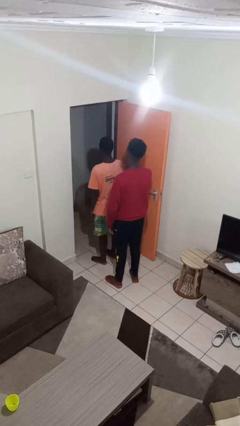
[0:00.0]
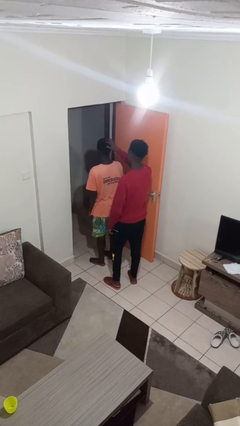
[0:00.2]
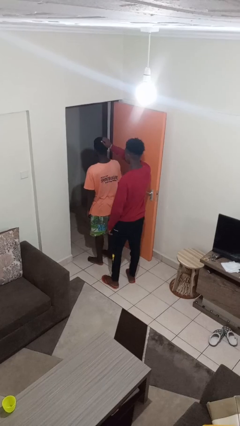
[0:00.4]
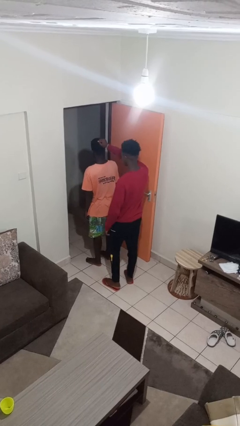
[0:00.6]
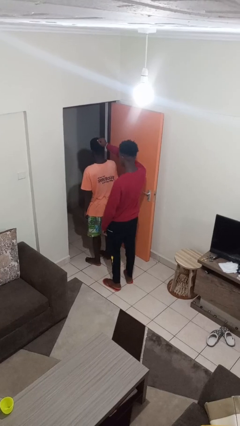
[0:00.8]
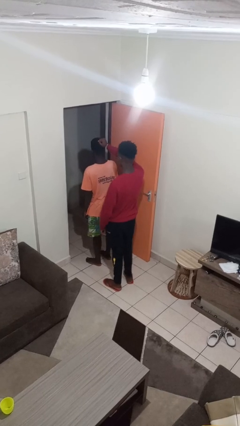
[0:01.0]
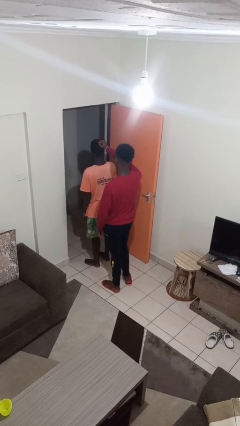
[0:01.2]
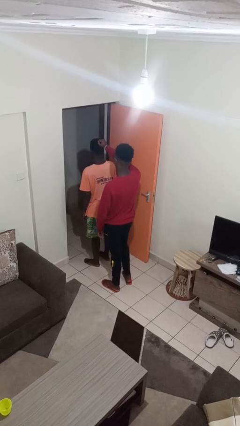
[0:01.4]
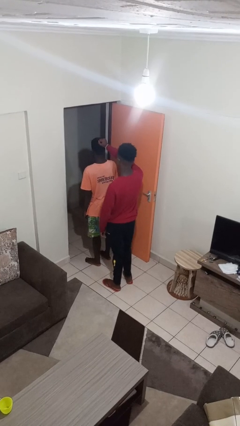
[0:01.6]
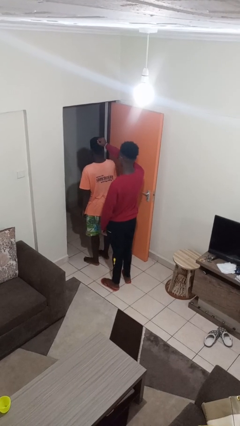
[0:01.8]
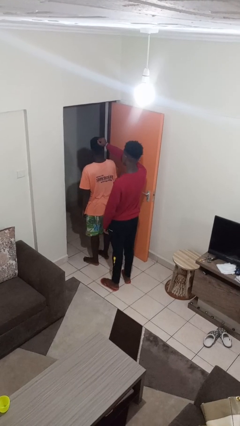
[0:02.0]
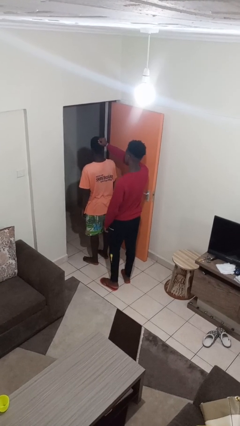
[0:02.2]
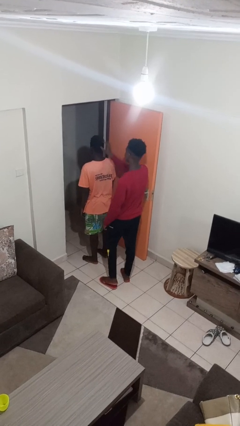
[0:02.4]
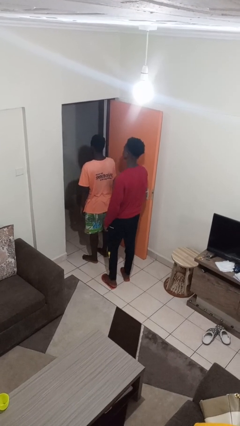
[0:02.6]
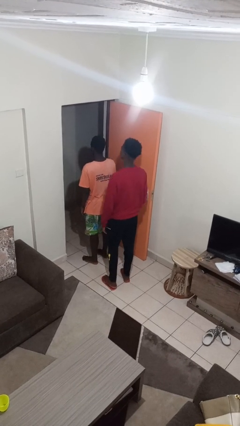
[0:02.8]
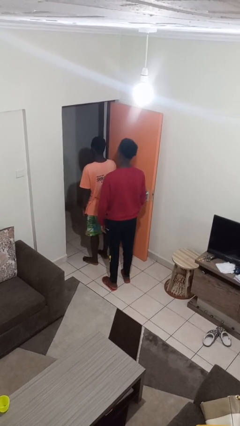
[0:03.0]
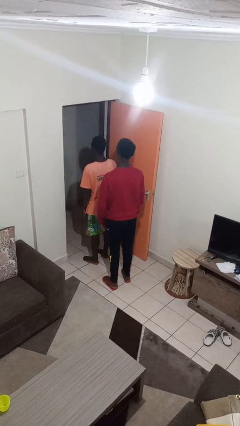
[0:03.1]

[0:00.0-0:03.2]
person grabs person by hair

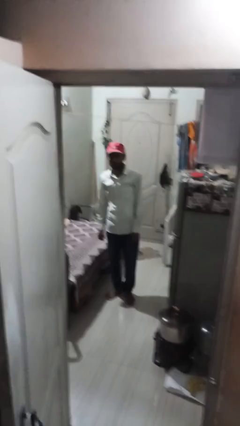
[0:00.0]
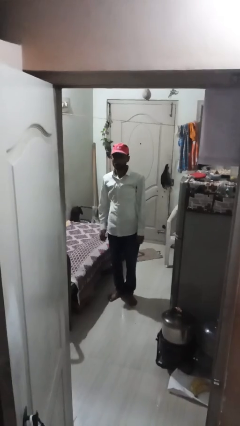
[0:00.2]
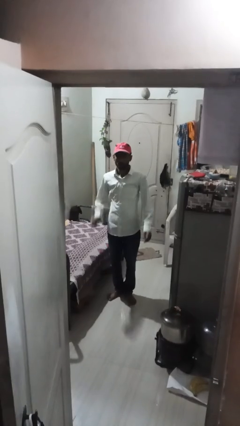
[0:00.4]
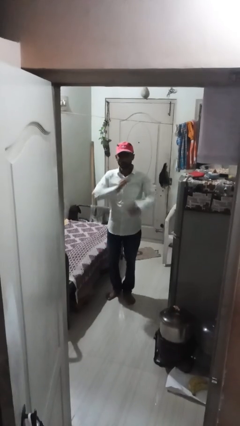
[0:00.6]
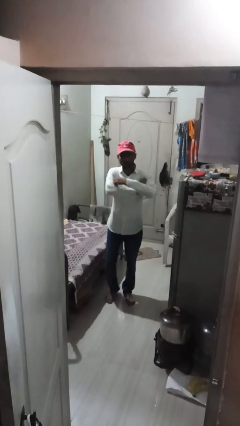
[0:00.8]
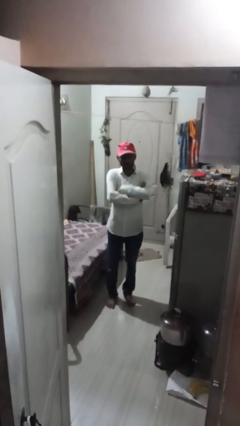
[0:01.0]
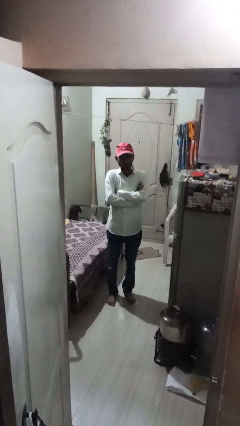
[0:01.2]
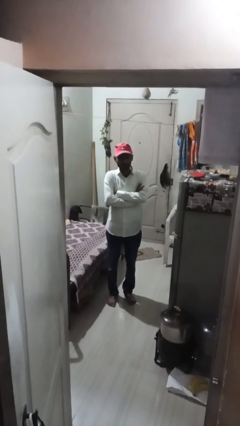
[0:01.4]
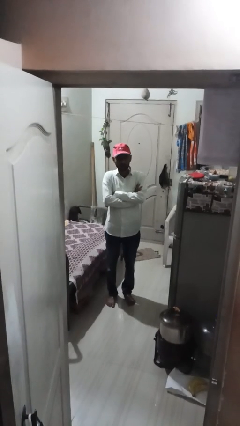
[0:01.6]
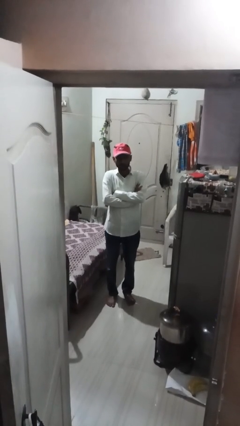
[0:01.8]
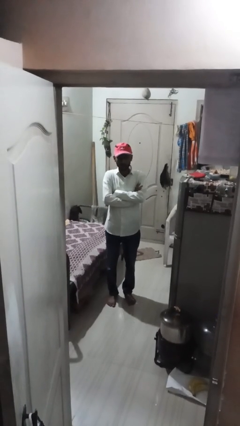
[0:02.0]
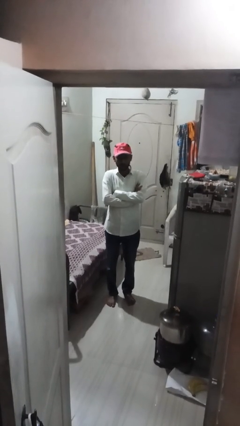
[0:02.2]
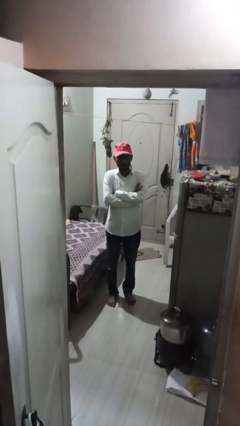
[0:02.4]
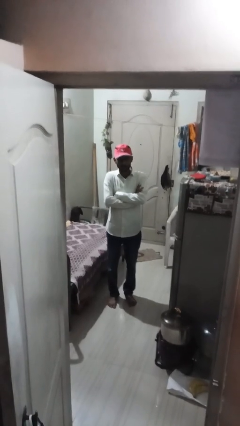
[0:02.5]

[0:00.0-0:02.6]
person crosses arms

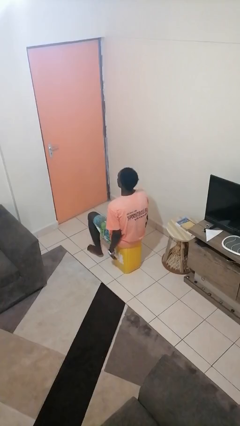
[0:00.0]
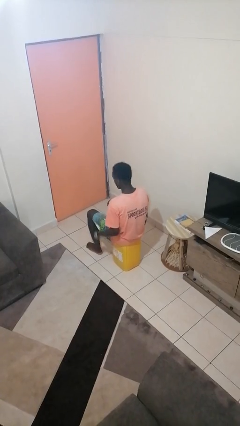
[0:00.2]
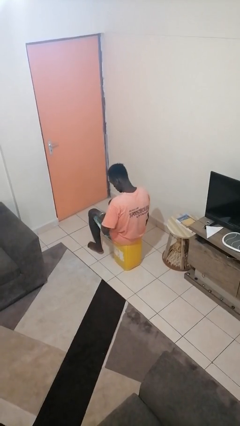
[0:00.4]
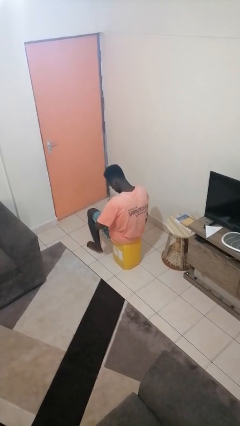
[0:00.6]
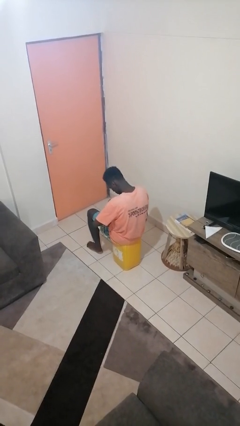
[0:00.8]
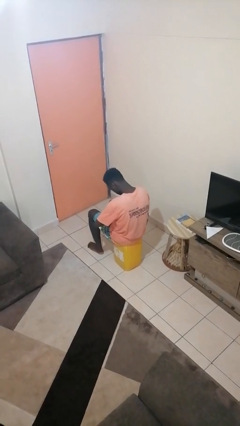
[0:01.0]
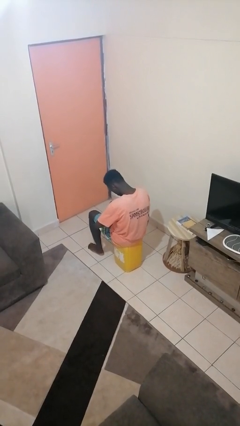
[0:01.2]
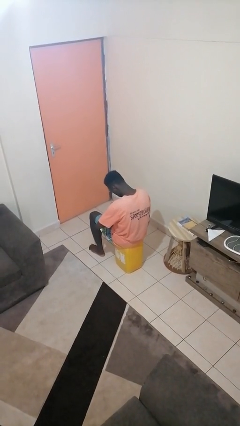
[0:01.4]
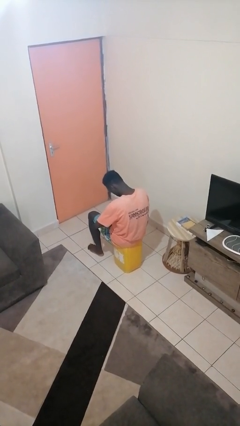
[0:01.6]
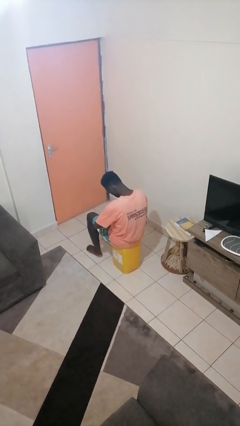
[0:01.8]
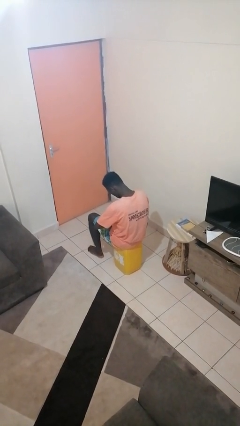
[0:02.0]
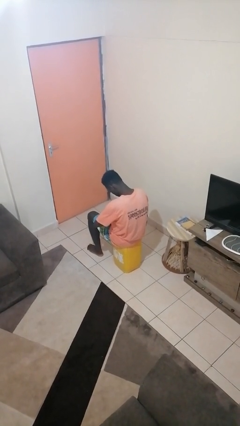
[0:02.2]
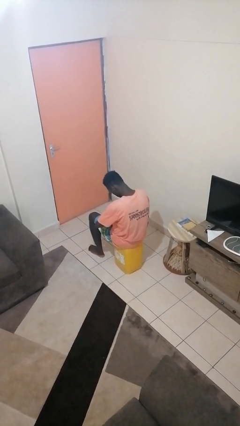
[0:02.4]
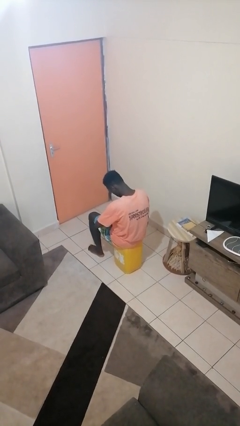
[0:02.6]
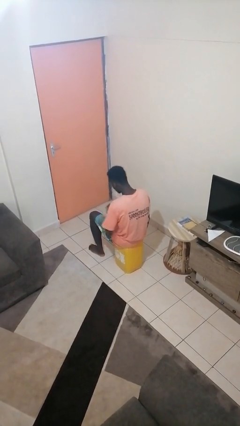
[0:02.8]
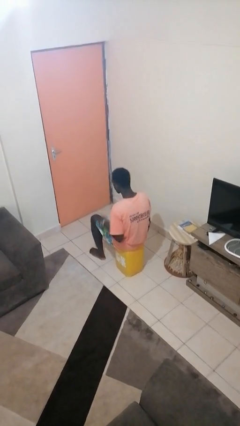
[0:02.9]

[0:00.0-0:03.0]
person looks at wristwatch

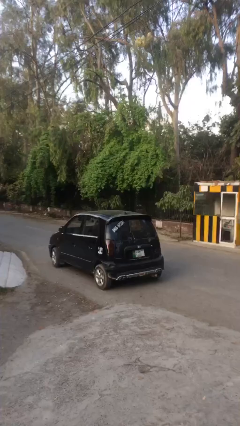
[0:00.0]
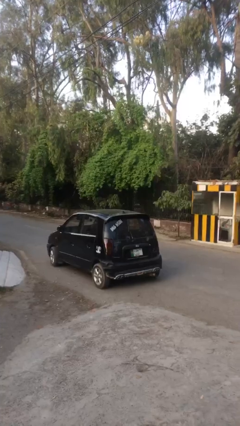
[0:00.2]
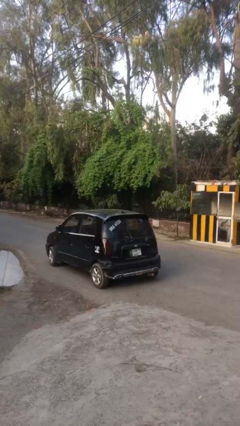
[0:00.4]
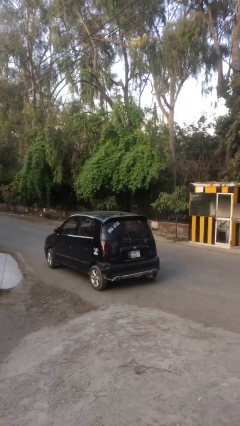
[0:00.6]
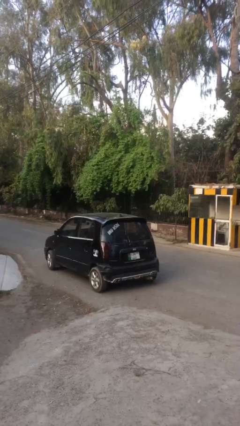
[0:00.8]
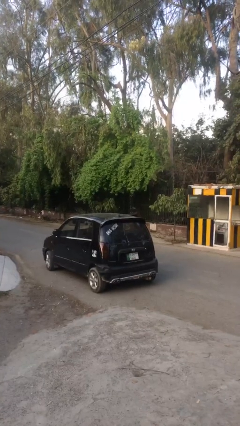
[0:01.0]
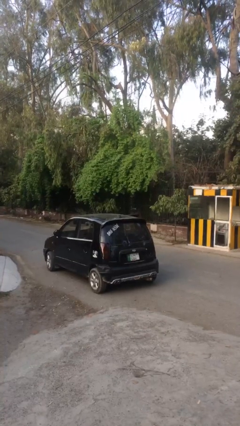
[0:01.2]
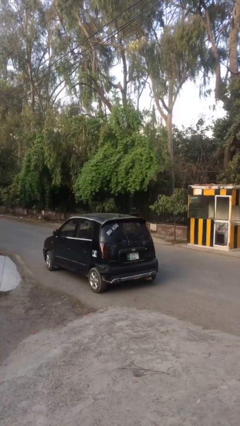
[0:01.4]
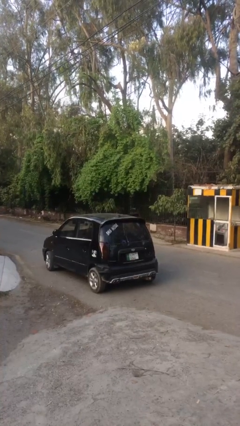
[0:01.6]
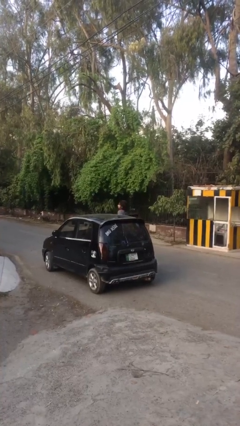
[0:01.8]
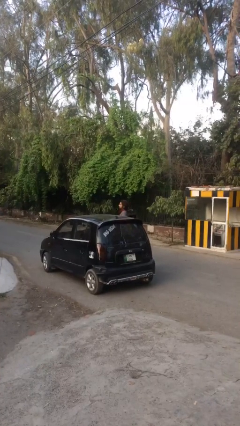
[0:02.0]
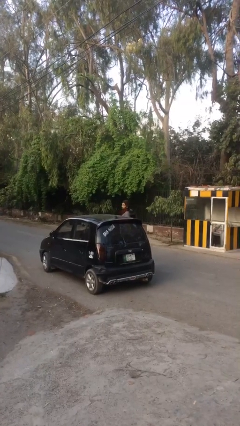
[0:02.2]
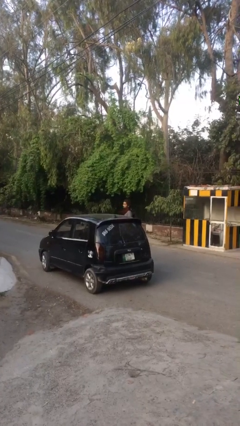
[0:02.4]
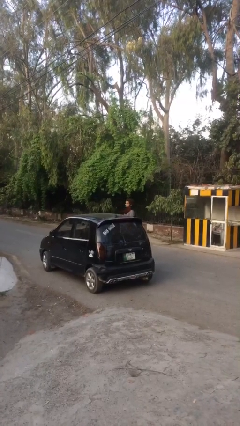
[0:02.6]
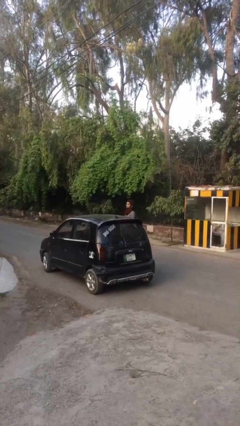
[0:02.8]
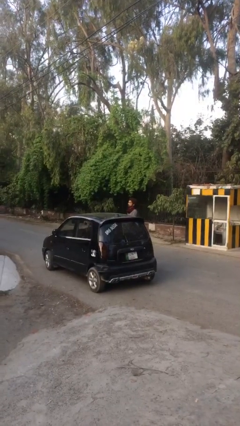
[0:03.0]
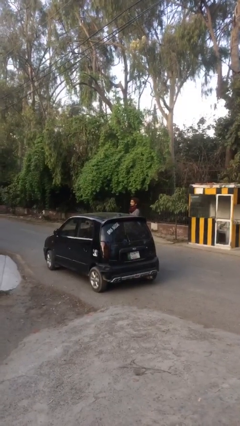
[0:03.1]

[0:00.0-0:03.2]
person exits car

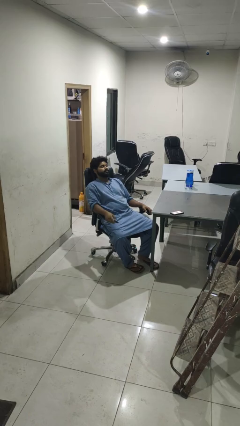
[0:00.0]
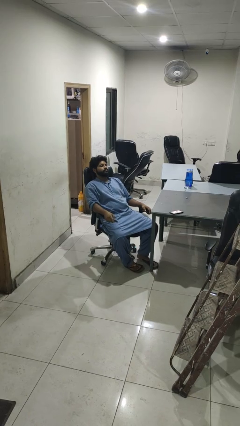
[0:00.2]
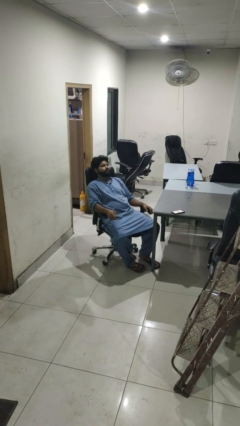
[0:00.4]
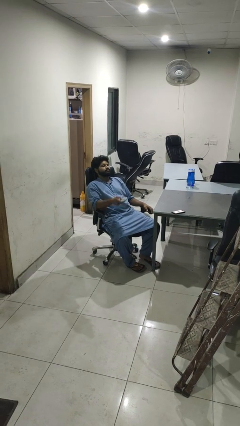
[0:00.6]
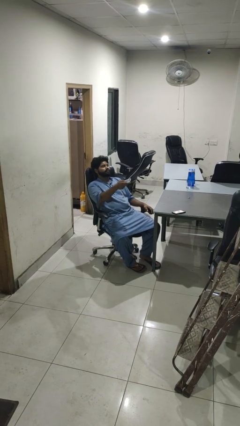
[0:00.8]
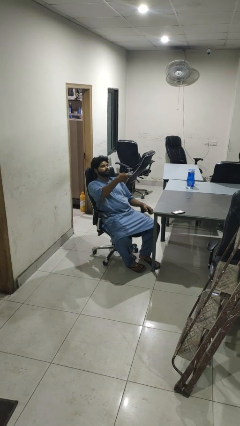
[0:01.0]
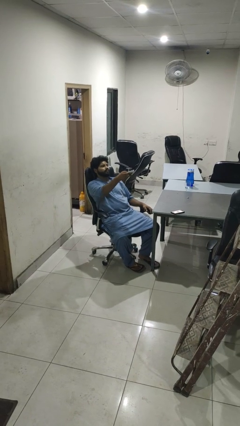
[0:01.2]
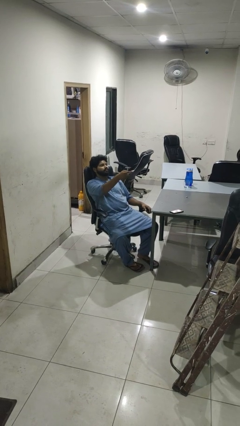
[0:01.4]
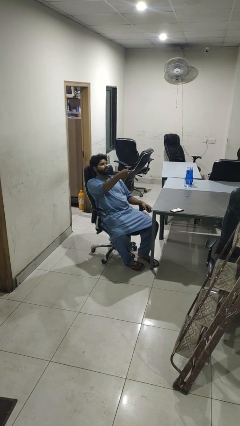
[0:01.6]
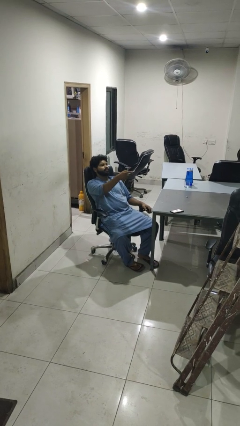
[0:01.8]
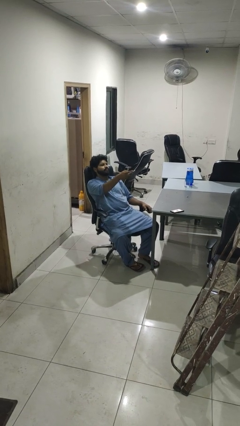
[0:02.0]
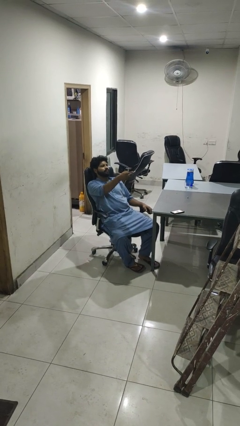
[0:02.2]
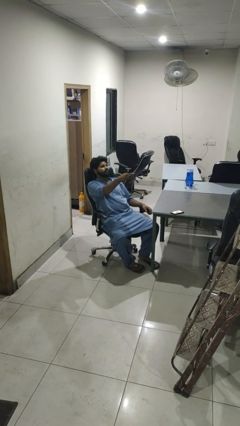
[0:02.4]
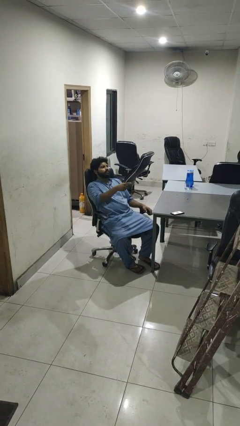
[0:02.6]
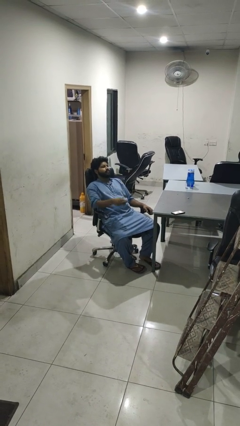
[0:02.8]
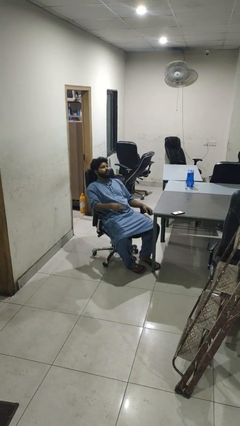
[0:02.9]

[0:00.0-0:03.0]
person uses television remote

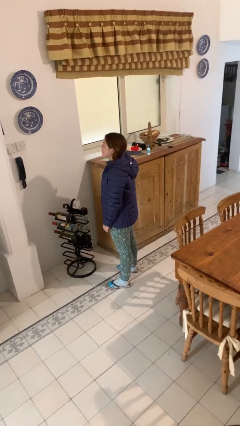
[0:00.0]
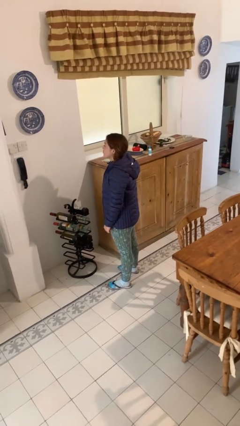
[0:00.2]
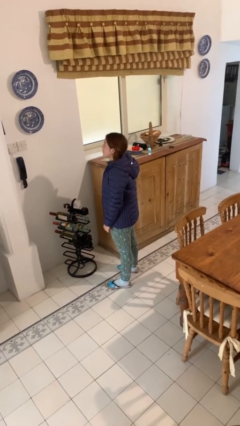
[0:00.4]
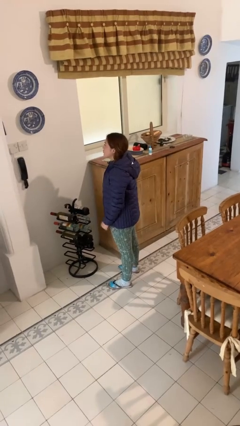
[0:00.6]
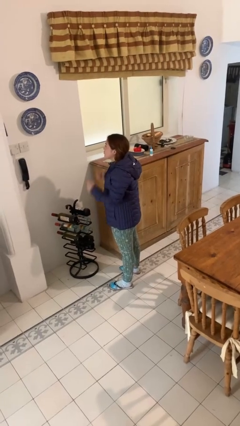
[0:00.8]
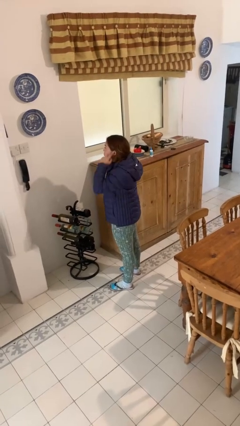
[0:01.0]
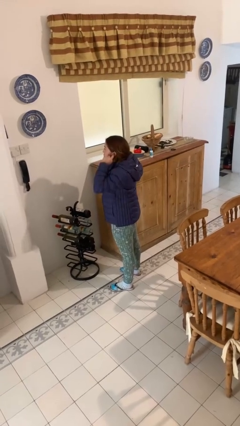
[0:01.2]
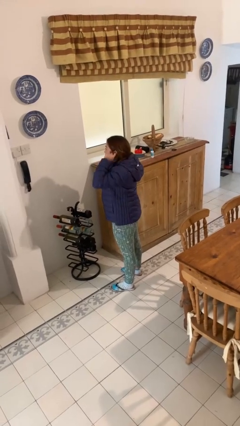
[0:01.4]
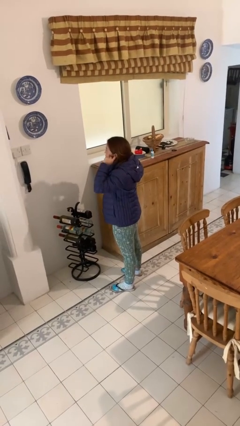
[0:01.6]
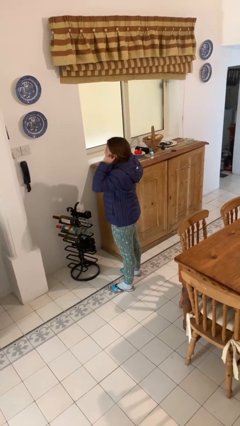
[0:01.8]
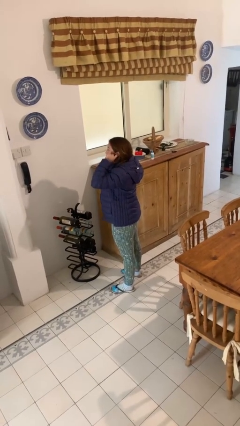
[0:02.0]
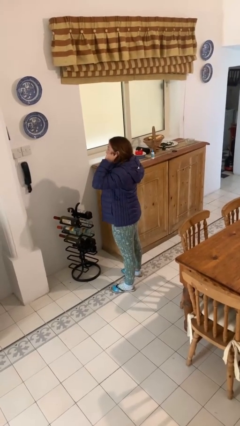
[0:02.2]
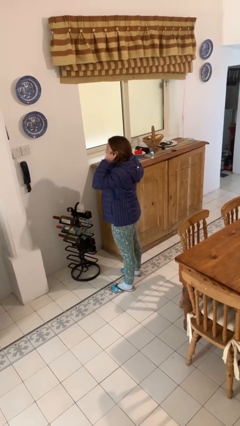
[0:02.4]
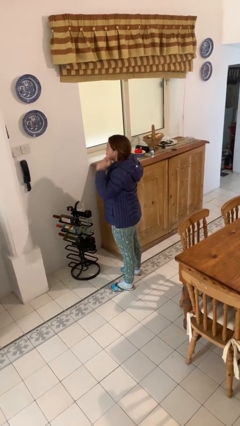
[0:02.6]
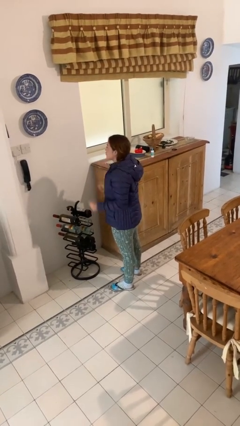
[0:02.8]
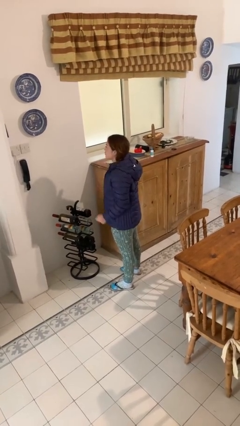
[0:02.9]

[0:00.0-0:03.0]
person puts fingers in ear
